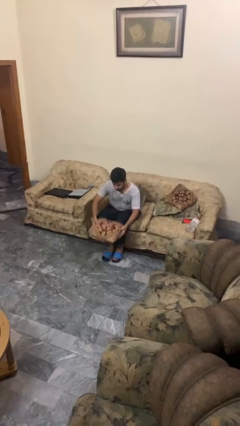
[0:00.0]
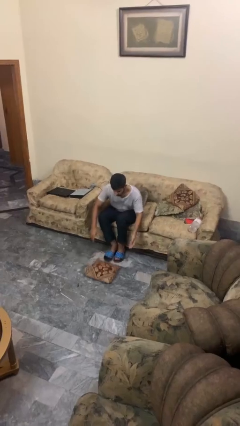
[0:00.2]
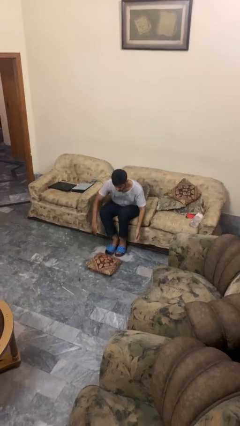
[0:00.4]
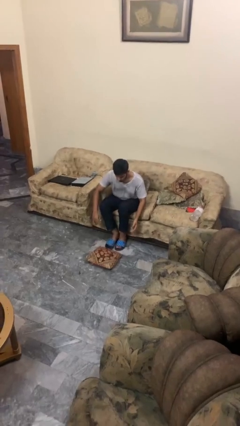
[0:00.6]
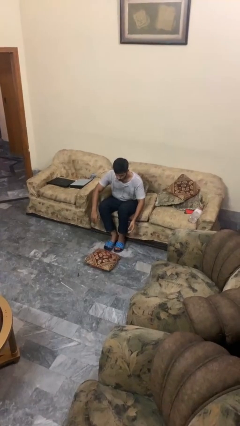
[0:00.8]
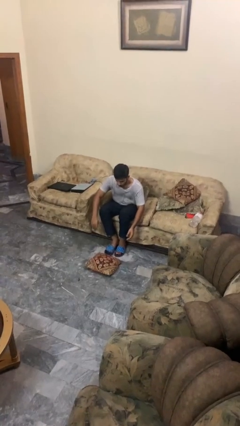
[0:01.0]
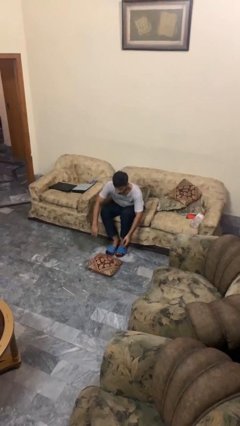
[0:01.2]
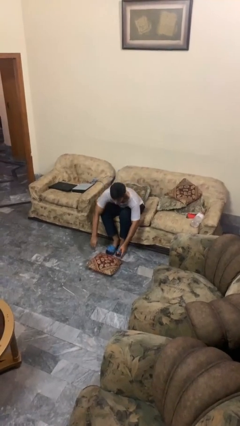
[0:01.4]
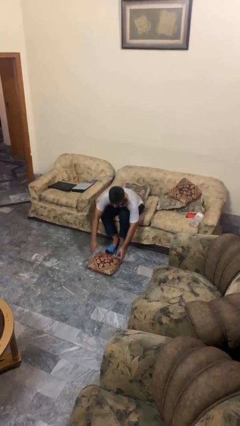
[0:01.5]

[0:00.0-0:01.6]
person drops object

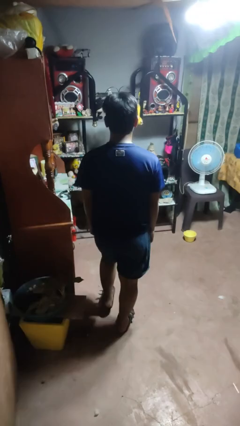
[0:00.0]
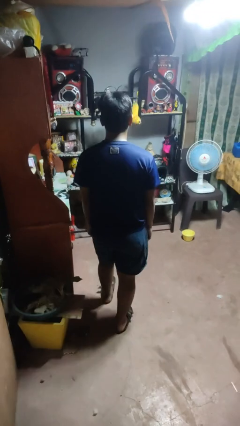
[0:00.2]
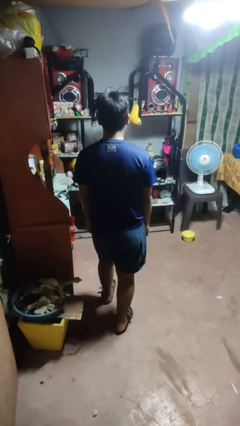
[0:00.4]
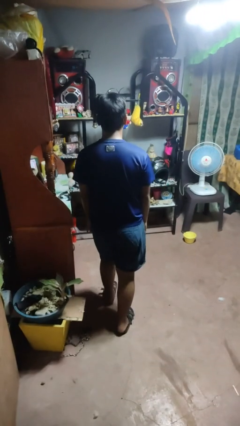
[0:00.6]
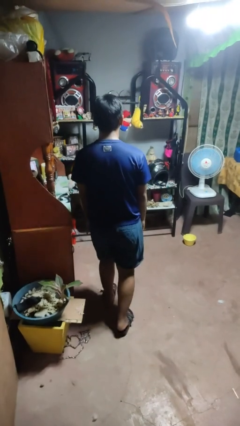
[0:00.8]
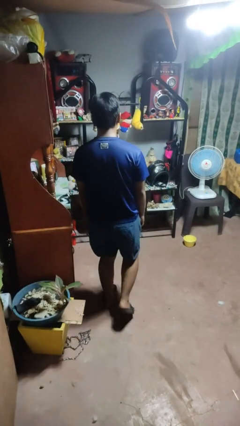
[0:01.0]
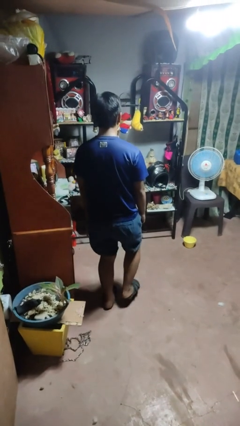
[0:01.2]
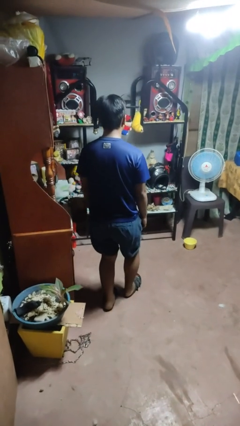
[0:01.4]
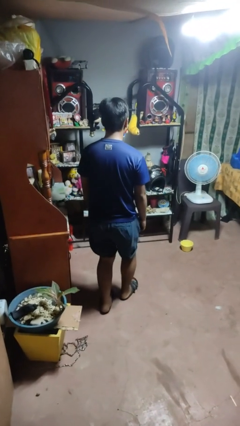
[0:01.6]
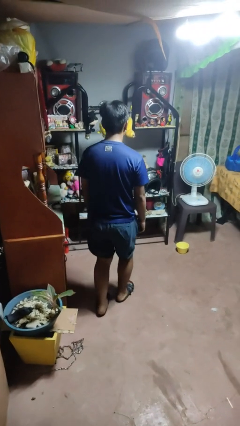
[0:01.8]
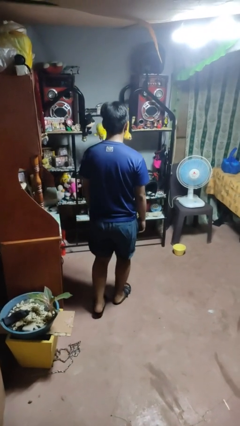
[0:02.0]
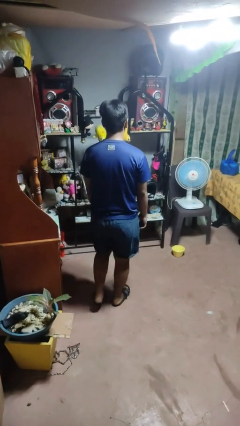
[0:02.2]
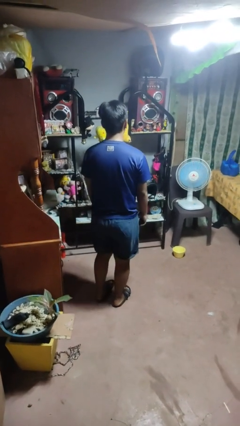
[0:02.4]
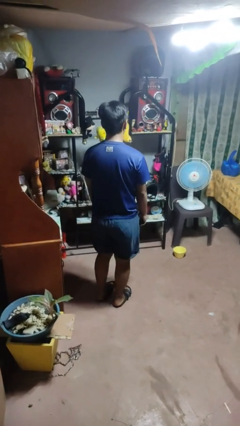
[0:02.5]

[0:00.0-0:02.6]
person walks tiptoe

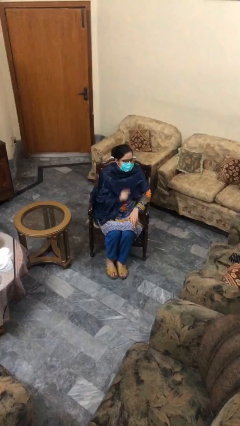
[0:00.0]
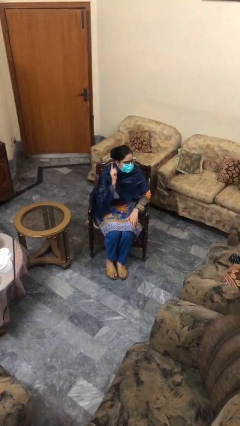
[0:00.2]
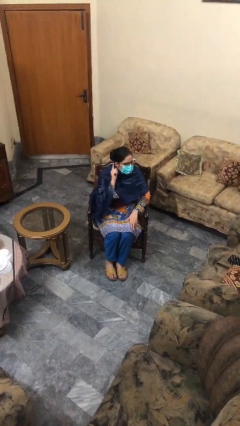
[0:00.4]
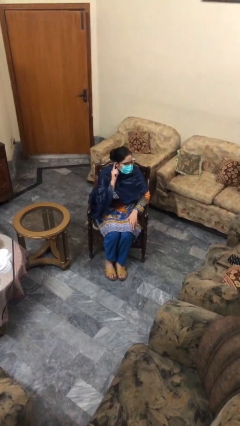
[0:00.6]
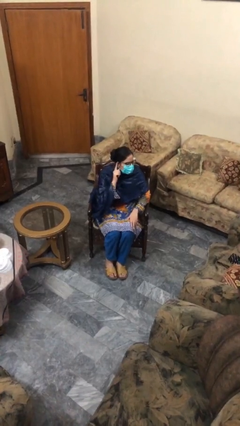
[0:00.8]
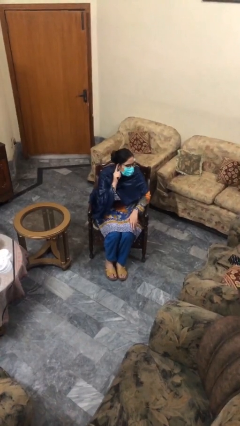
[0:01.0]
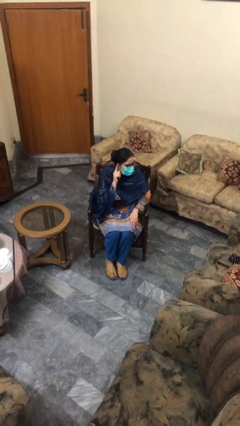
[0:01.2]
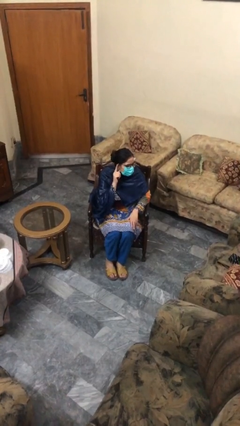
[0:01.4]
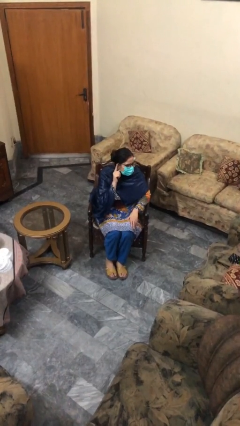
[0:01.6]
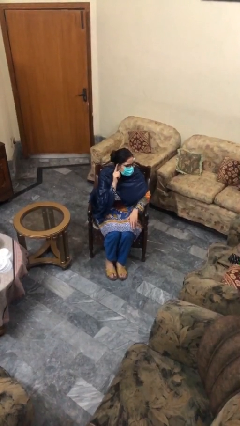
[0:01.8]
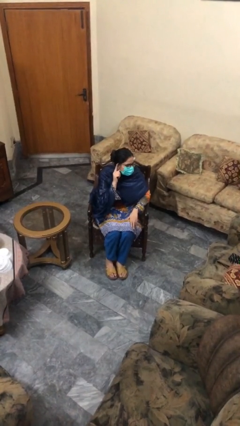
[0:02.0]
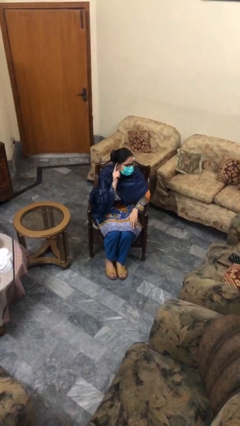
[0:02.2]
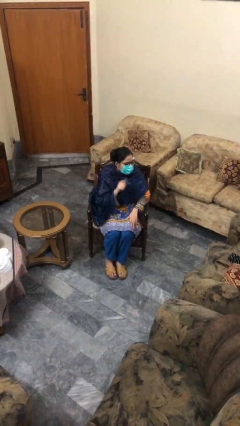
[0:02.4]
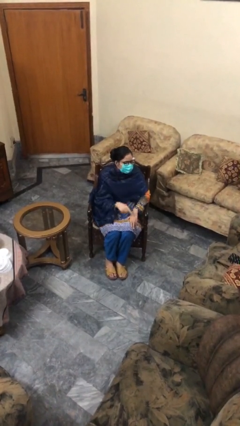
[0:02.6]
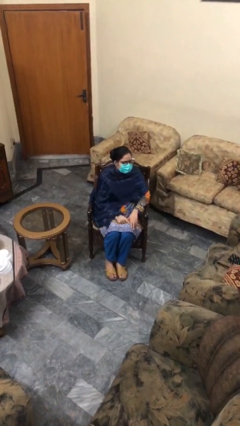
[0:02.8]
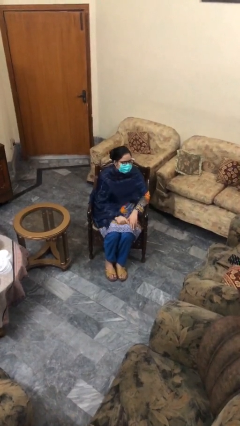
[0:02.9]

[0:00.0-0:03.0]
person gestures listen closely

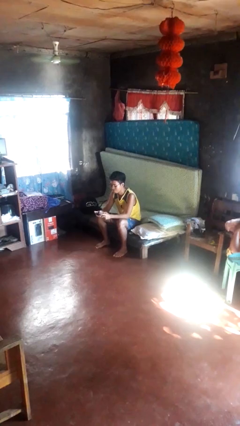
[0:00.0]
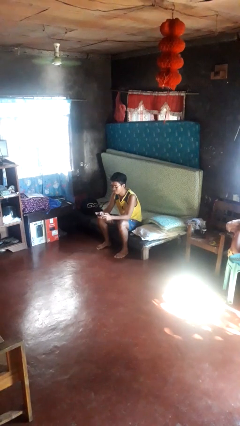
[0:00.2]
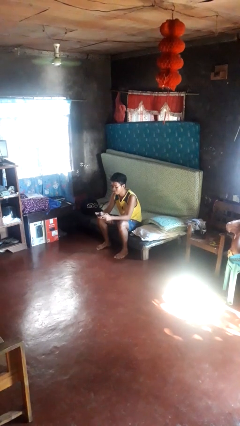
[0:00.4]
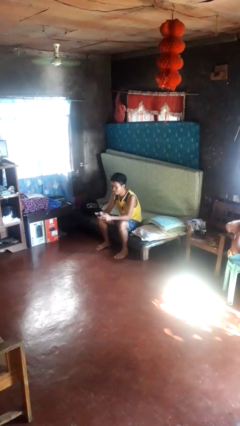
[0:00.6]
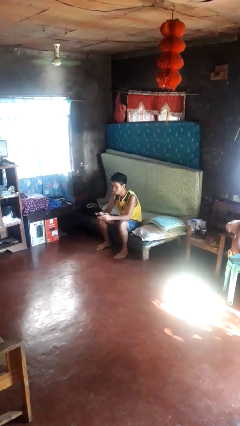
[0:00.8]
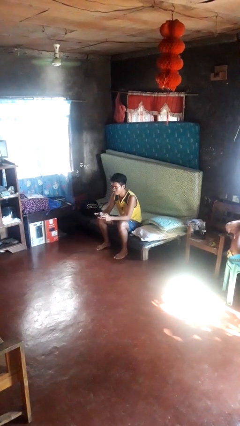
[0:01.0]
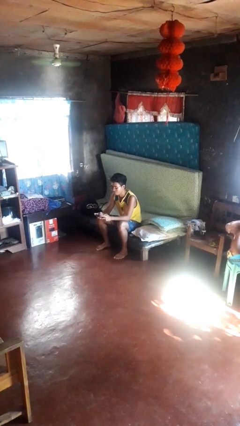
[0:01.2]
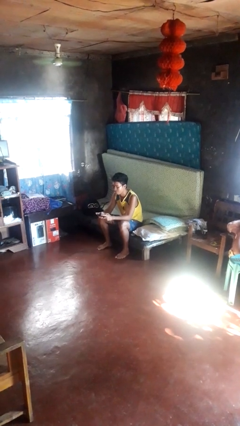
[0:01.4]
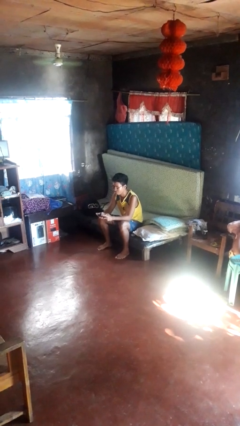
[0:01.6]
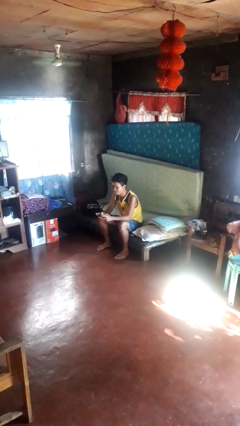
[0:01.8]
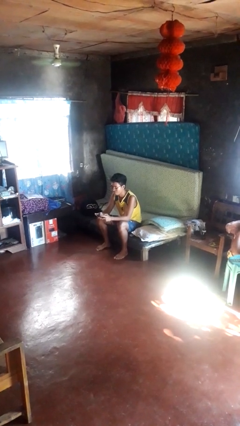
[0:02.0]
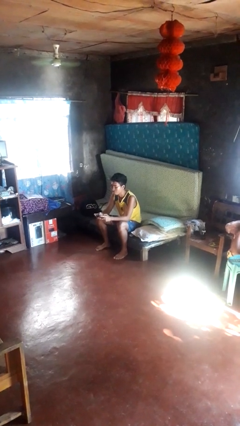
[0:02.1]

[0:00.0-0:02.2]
person interacts with handheld game

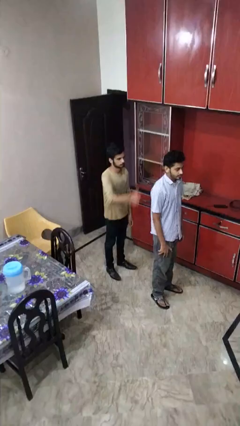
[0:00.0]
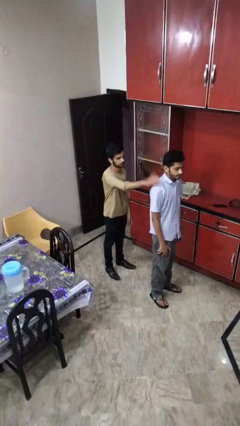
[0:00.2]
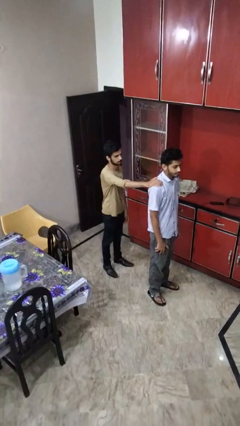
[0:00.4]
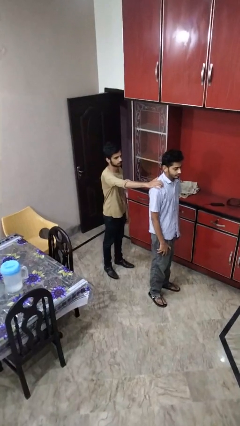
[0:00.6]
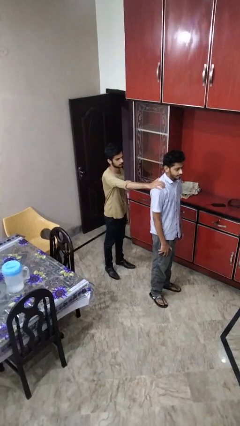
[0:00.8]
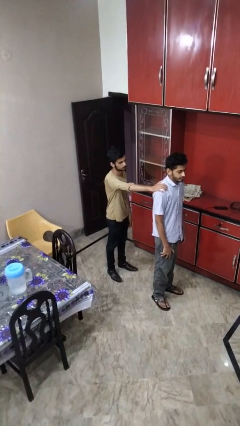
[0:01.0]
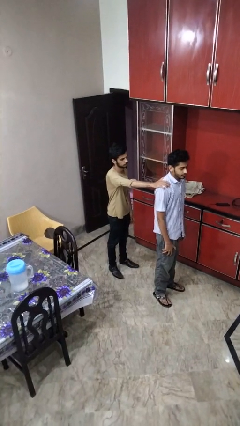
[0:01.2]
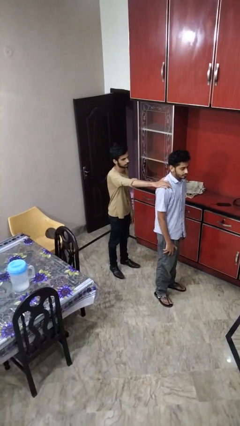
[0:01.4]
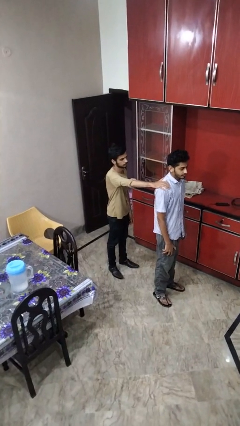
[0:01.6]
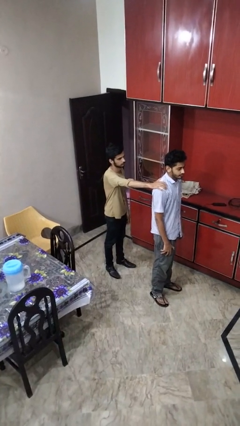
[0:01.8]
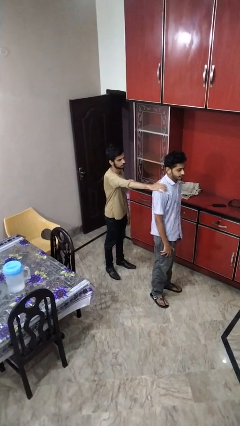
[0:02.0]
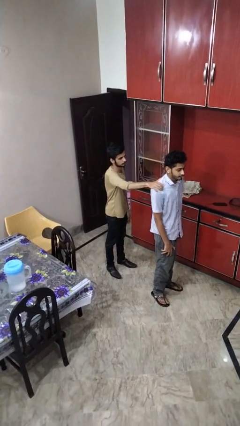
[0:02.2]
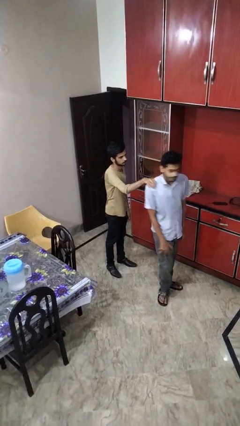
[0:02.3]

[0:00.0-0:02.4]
person grabs person by shoulder

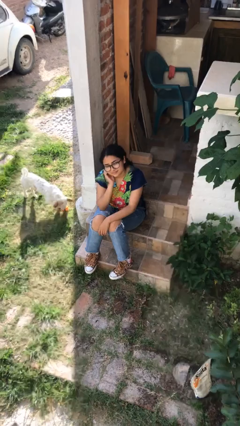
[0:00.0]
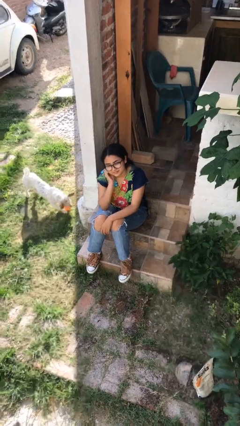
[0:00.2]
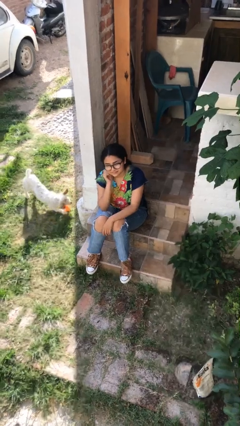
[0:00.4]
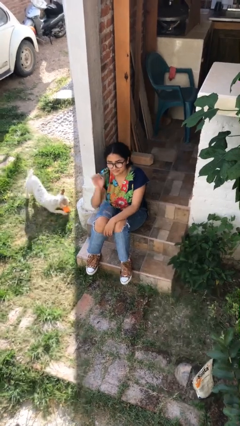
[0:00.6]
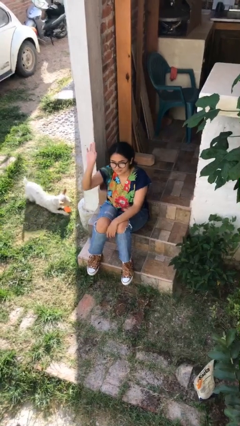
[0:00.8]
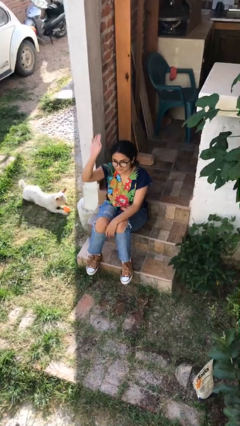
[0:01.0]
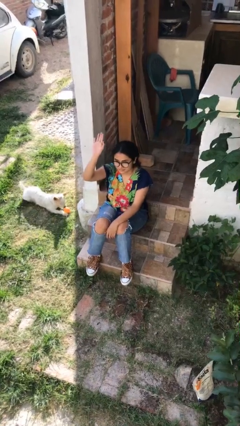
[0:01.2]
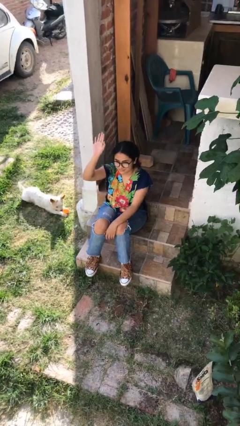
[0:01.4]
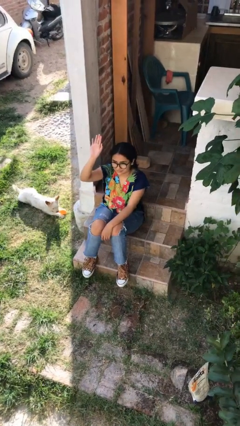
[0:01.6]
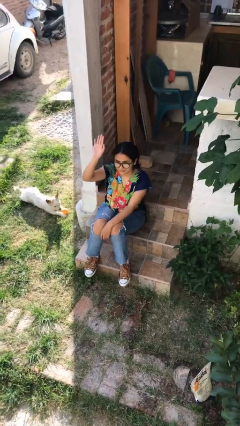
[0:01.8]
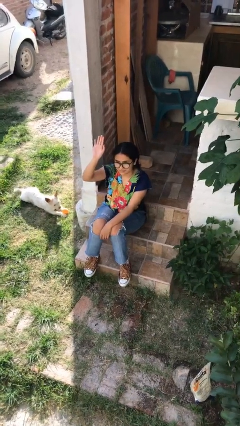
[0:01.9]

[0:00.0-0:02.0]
person gestures raise hand

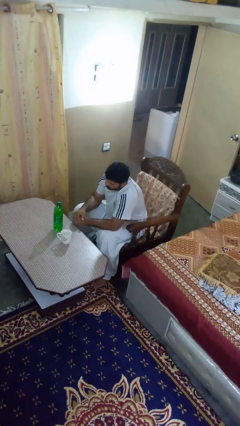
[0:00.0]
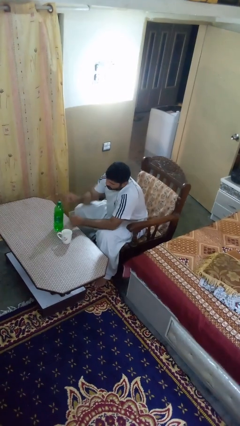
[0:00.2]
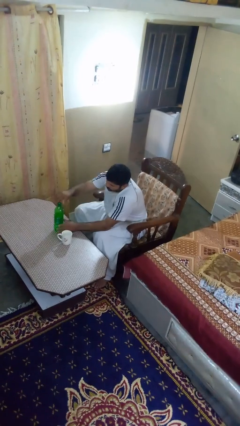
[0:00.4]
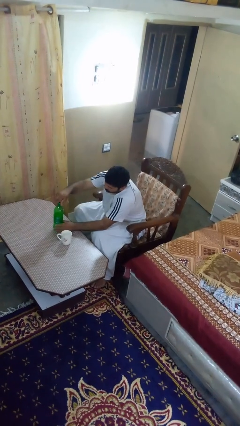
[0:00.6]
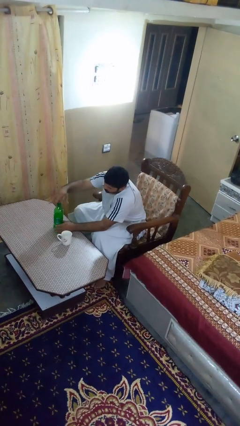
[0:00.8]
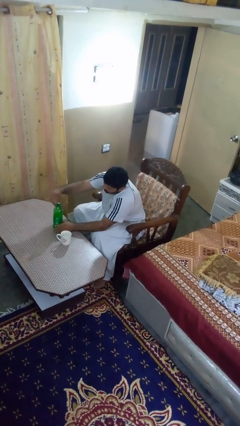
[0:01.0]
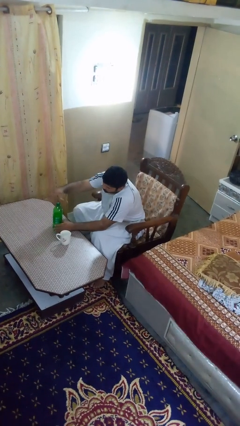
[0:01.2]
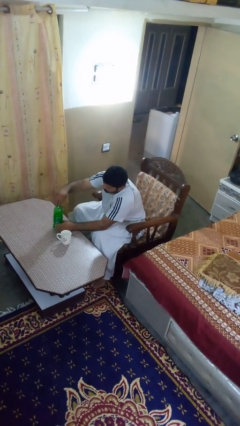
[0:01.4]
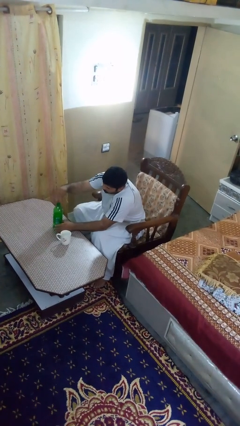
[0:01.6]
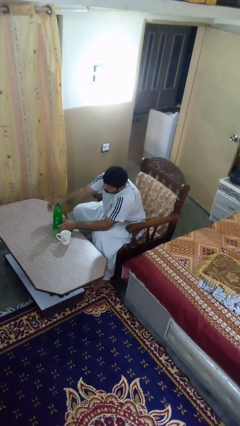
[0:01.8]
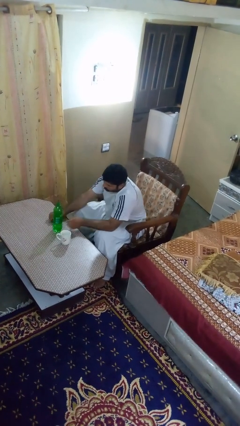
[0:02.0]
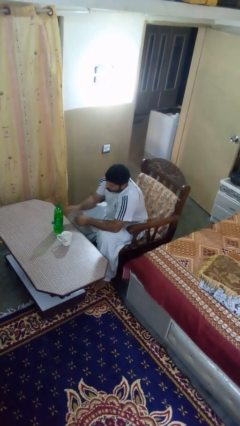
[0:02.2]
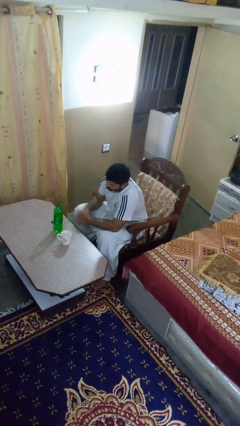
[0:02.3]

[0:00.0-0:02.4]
person unscrews lid from bottle

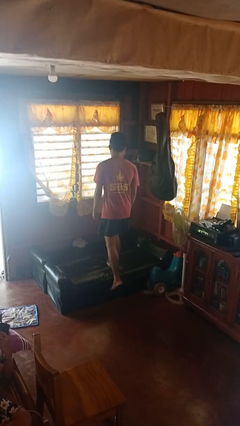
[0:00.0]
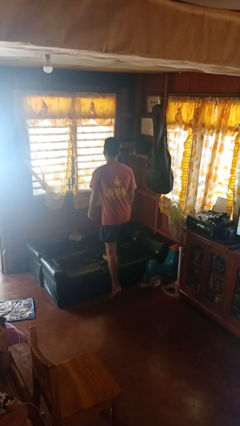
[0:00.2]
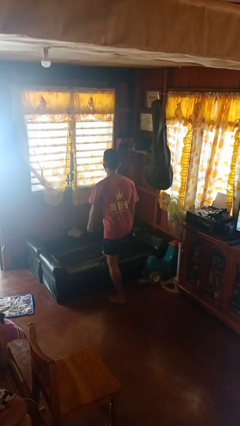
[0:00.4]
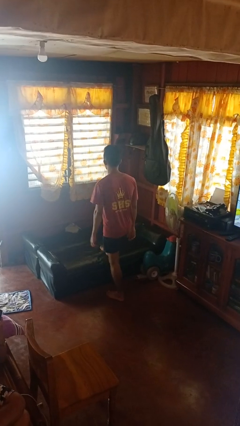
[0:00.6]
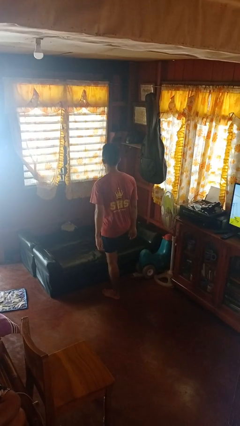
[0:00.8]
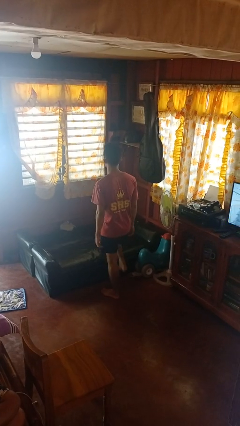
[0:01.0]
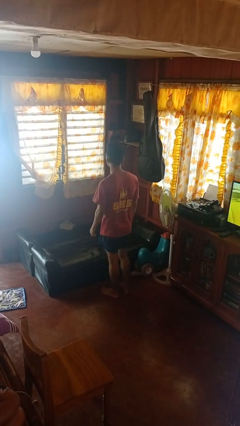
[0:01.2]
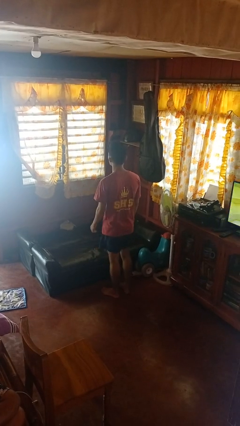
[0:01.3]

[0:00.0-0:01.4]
person climbs off couch
